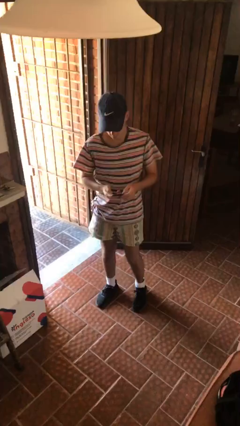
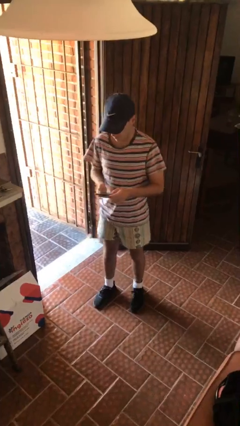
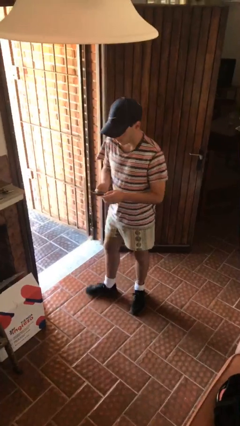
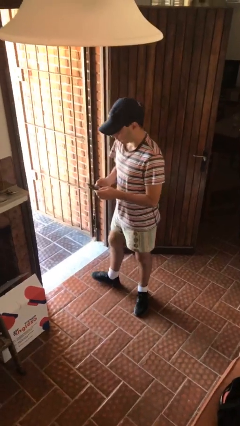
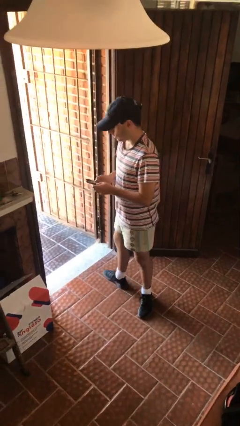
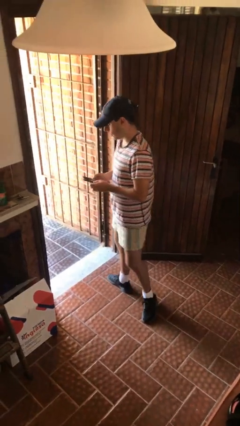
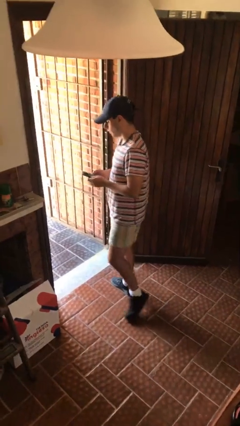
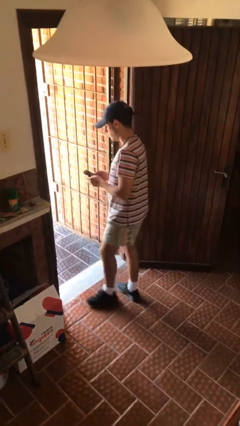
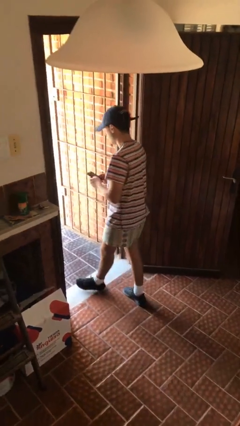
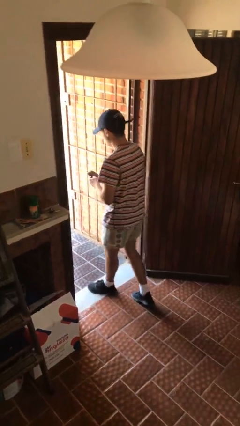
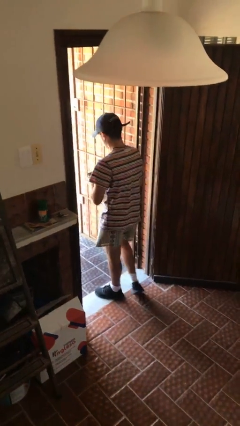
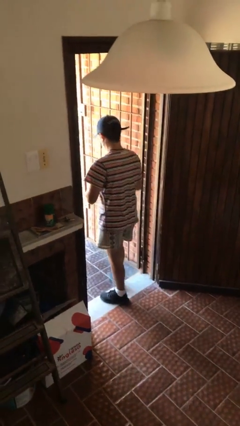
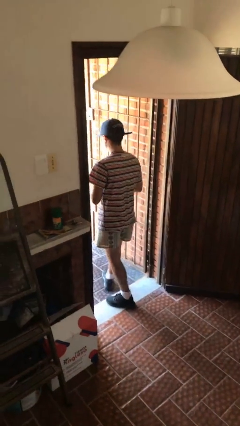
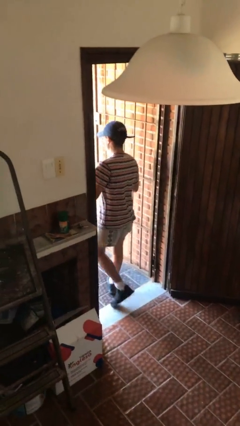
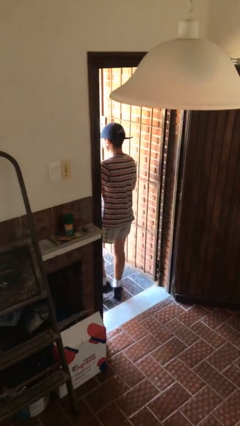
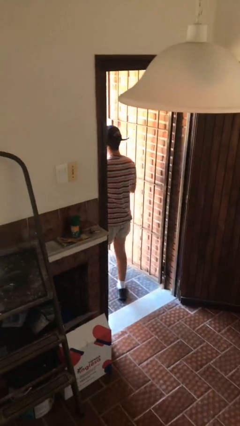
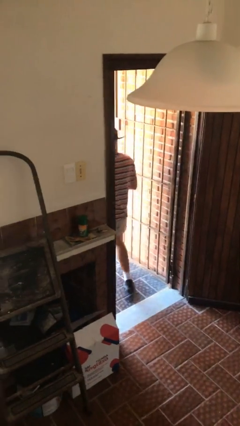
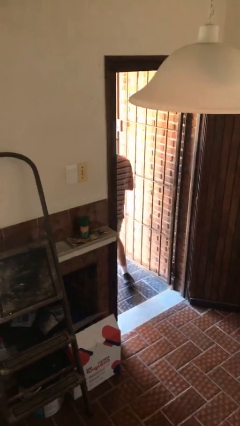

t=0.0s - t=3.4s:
person exits scene through structure

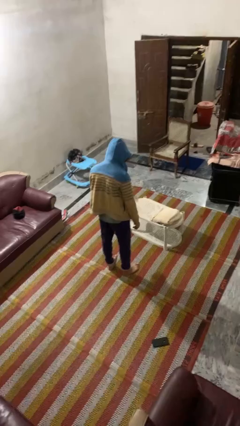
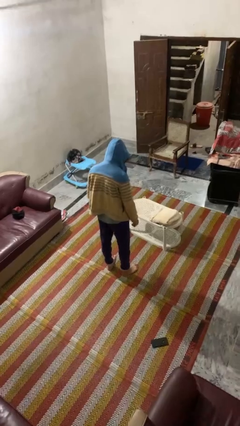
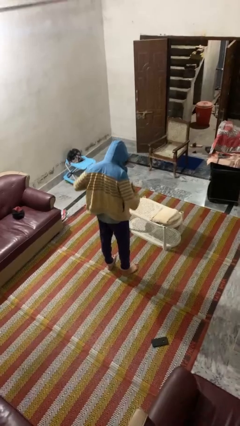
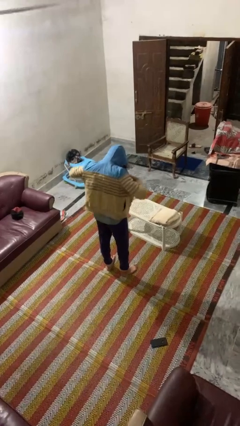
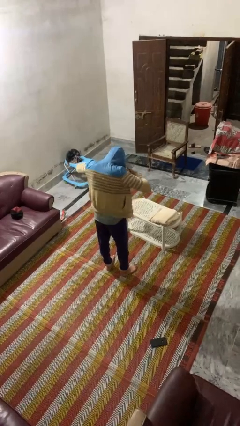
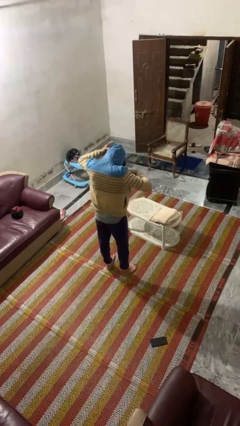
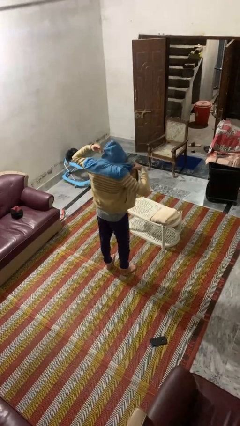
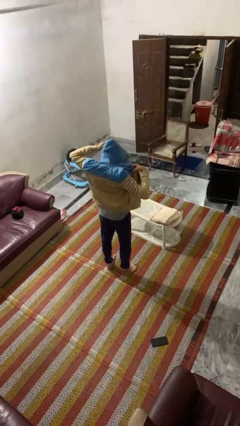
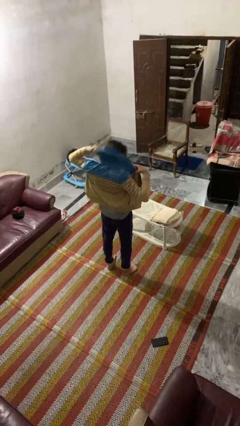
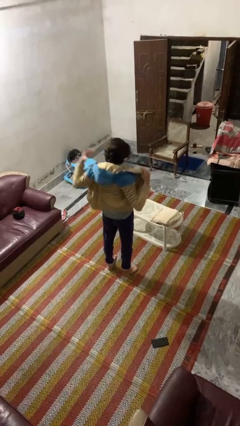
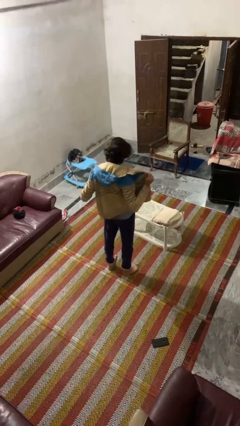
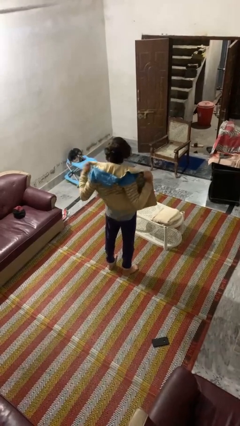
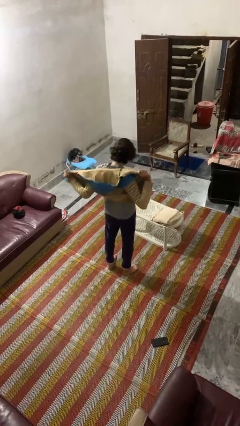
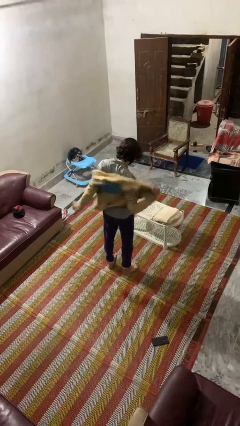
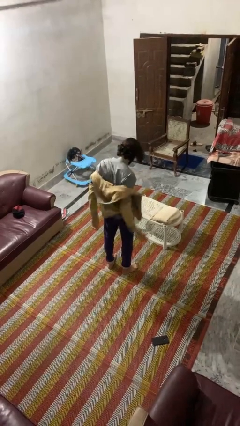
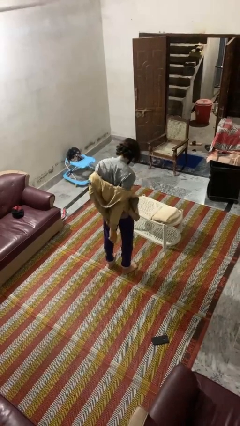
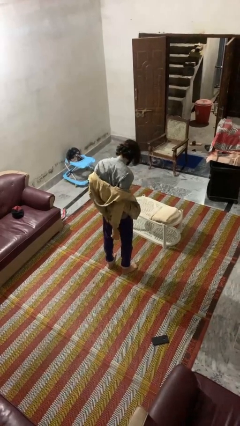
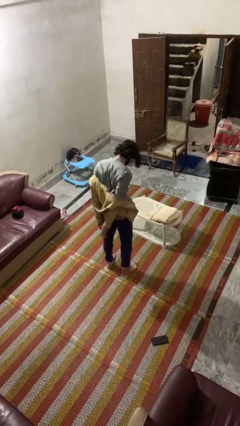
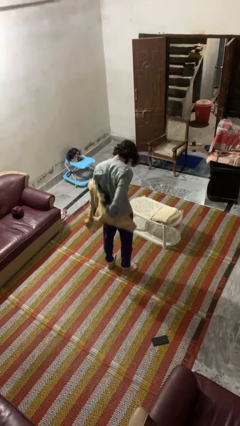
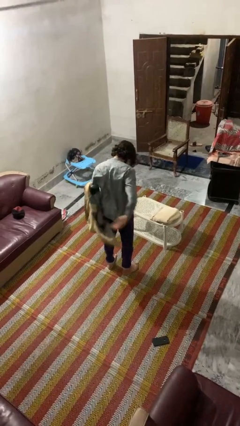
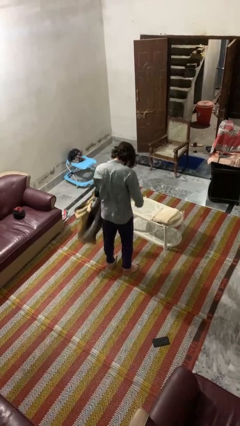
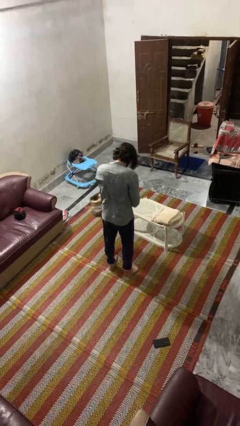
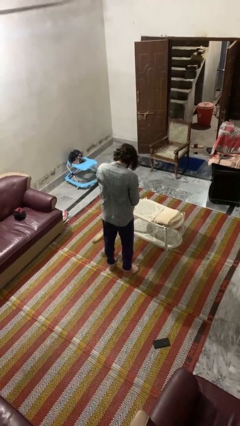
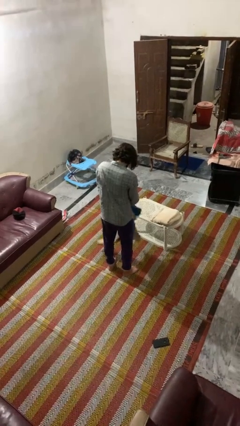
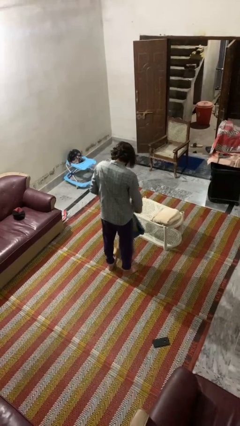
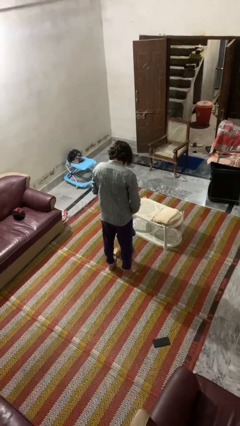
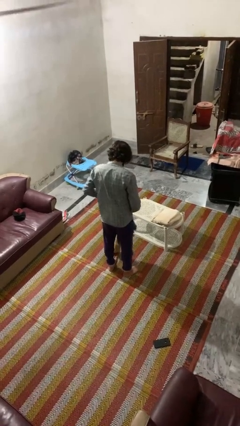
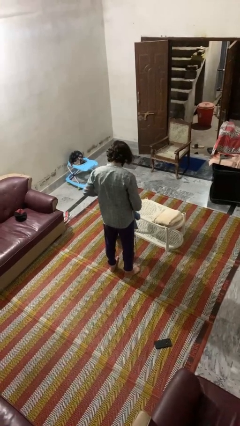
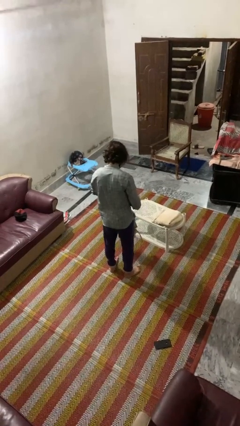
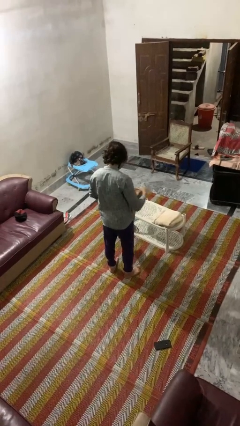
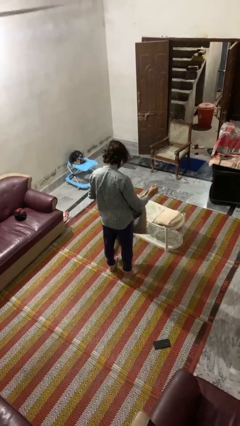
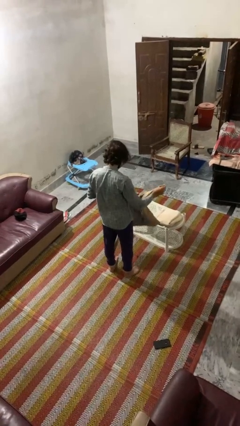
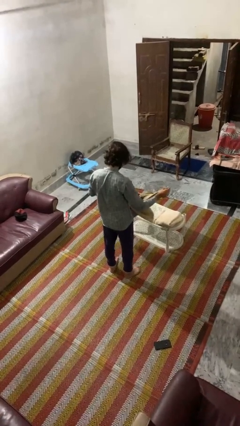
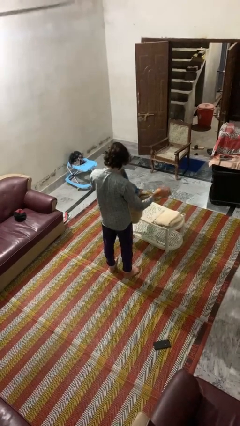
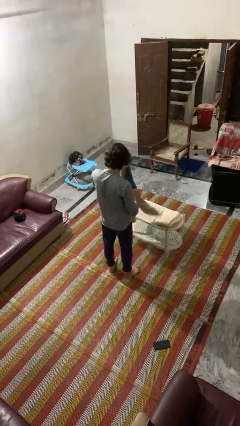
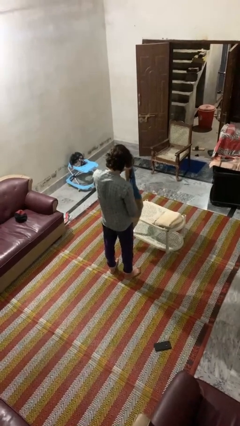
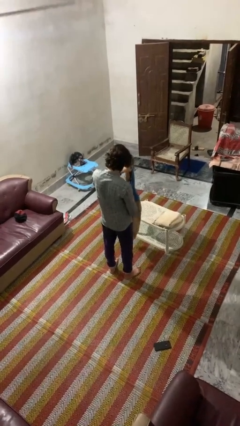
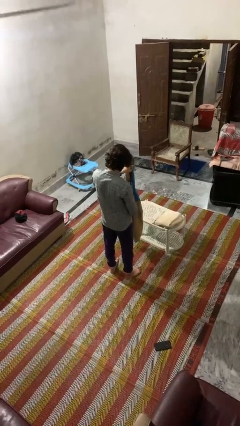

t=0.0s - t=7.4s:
person takes off hoodie

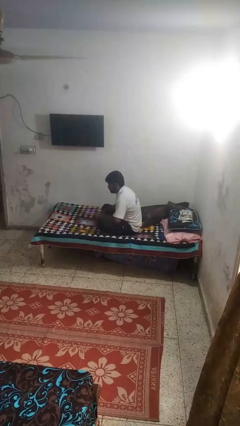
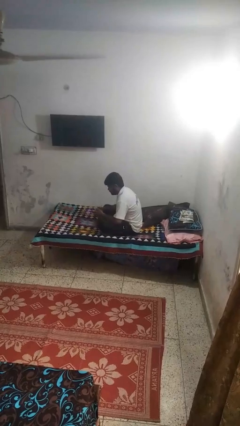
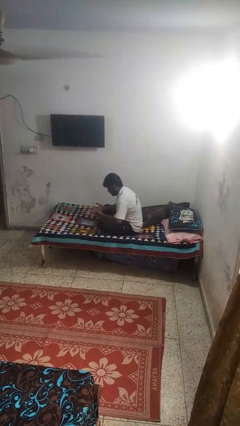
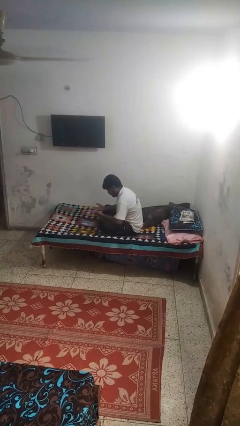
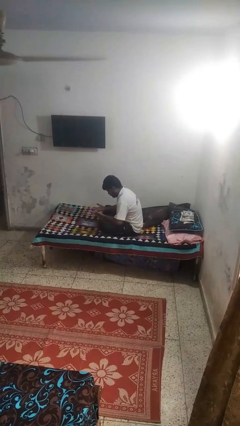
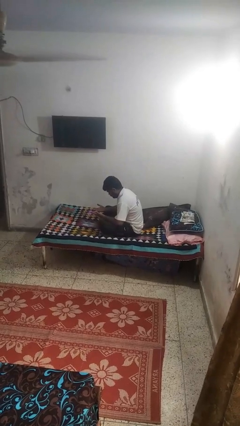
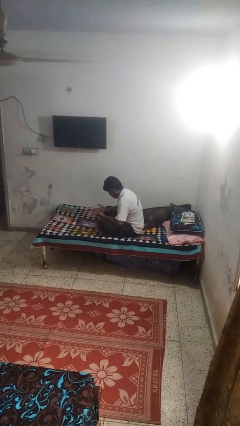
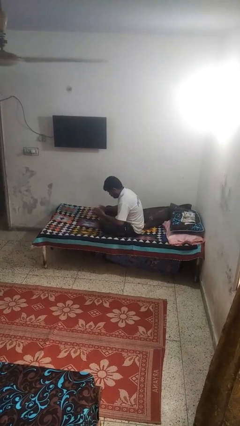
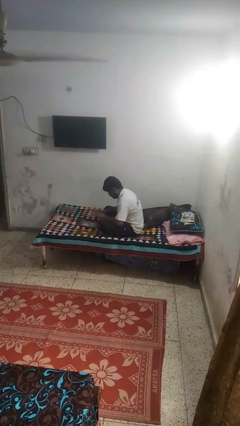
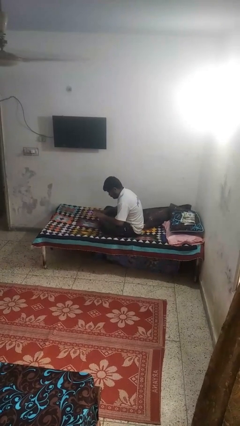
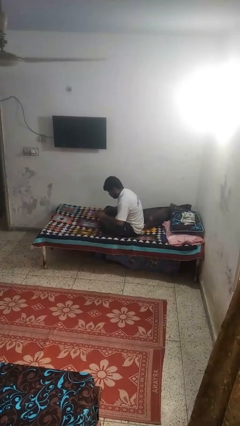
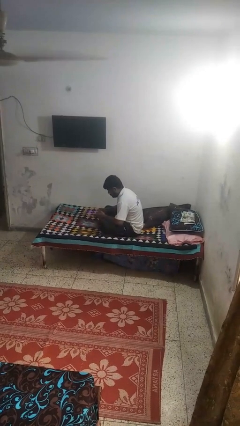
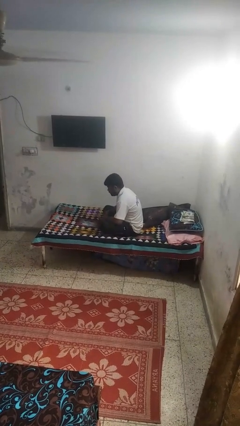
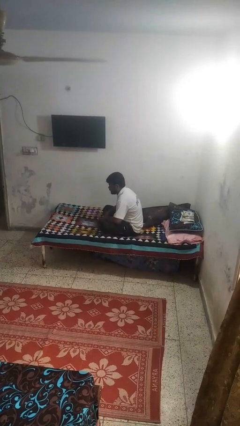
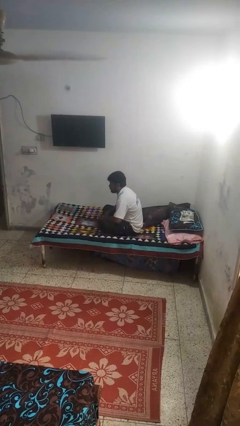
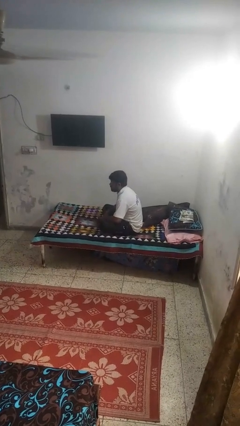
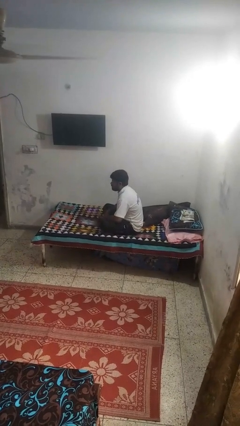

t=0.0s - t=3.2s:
person looks at hands in lap

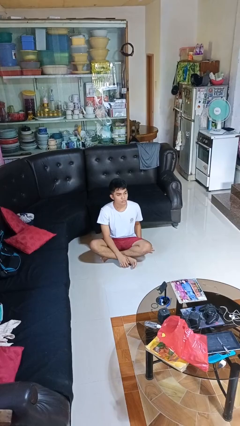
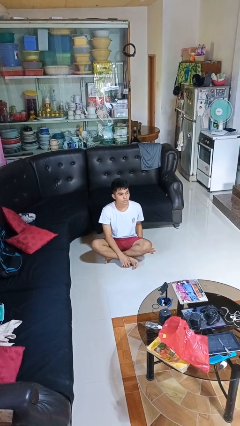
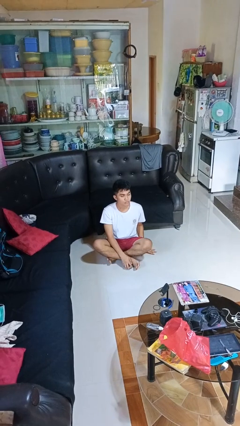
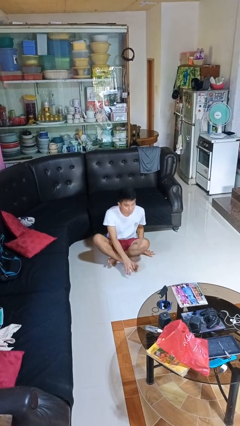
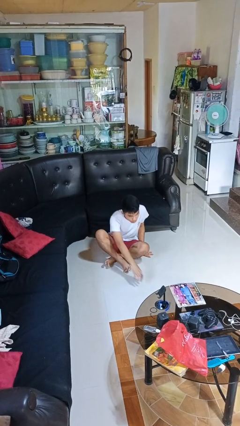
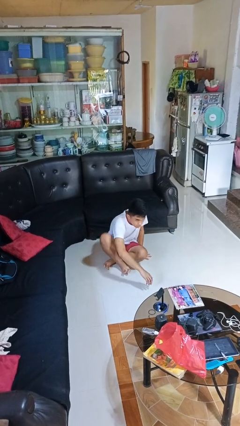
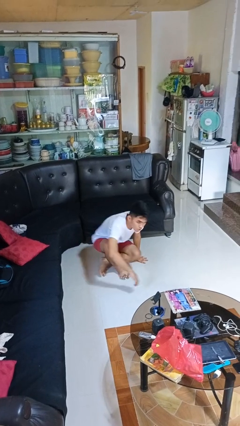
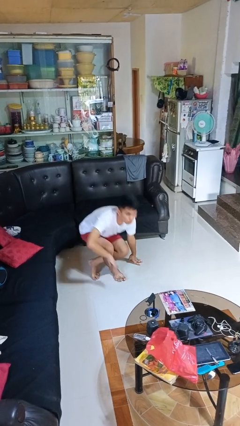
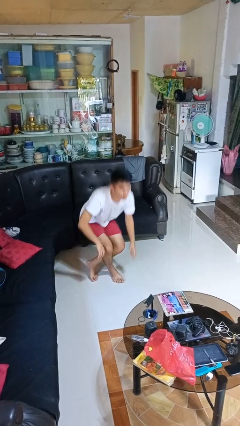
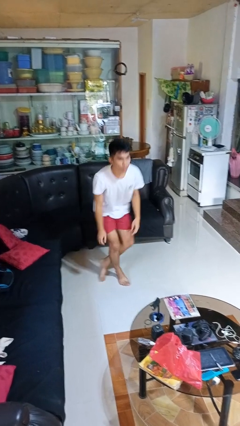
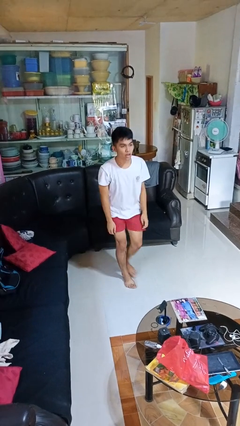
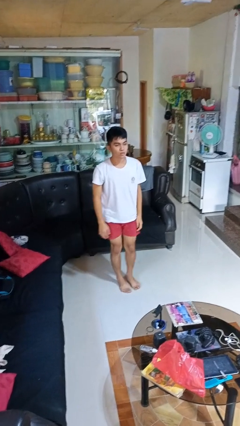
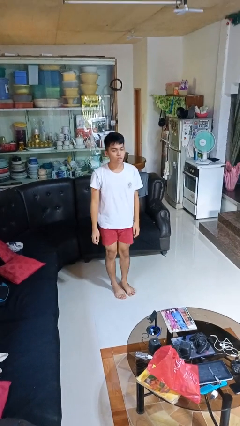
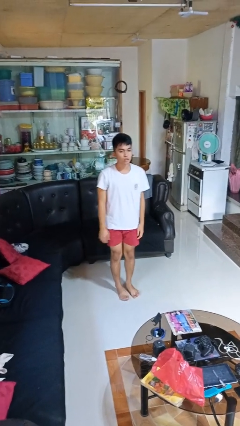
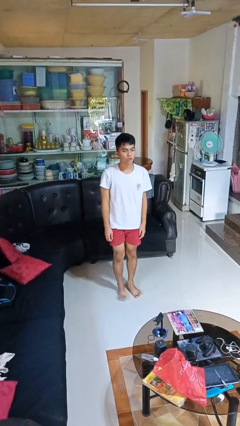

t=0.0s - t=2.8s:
person stands up from floor

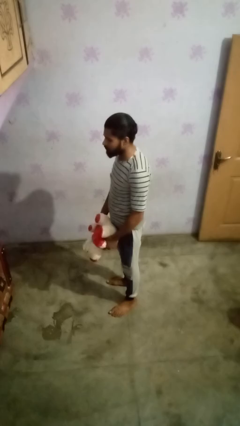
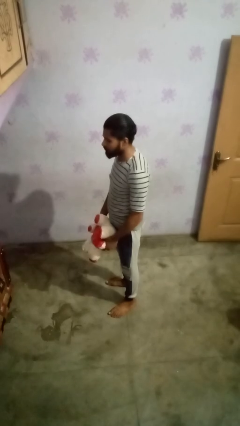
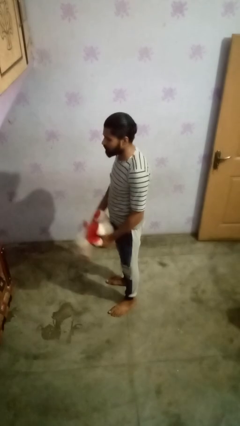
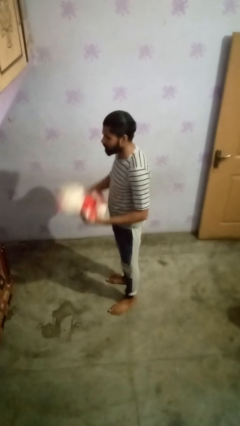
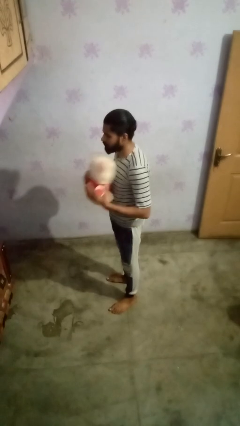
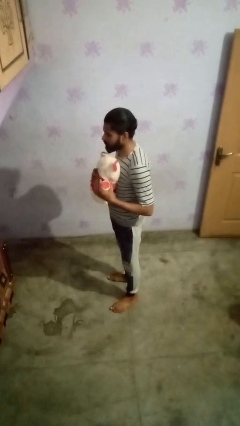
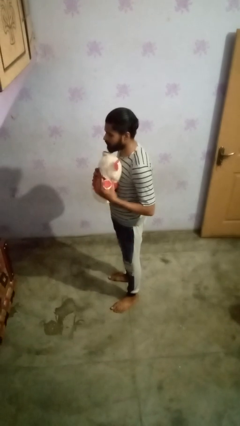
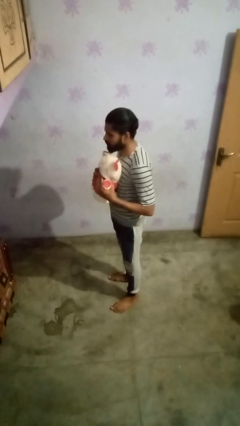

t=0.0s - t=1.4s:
person hugs stuffed animal
